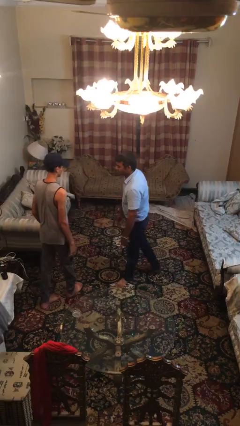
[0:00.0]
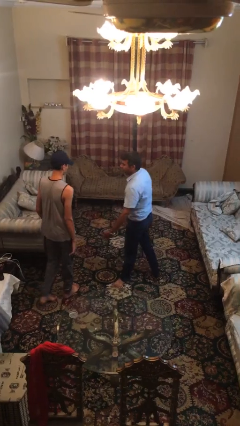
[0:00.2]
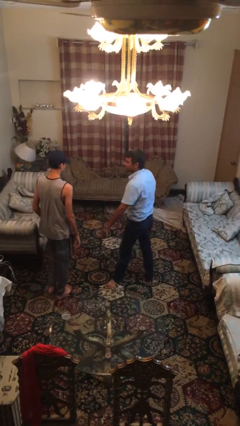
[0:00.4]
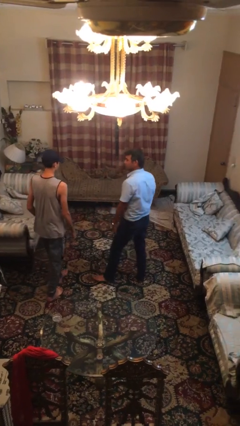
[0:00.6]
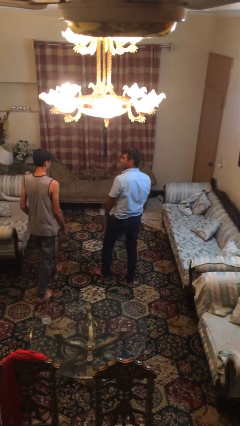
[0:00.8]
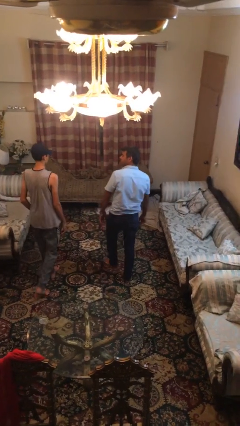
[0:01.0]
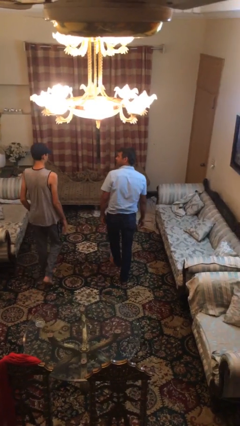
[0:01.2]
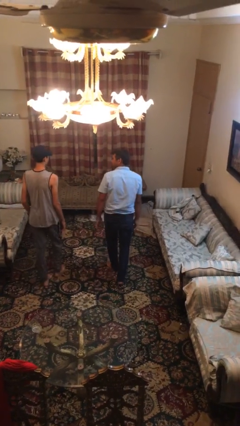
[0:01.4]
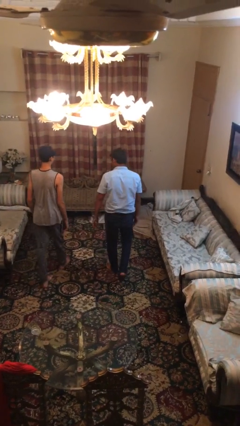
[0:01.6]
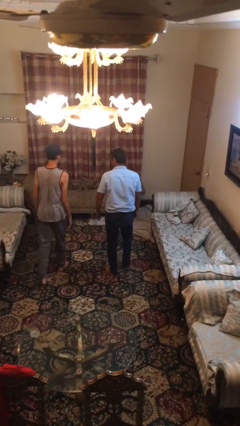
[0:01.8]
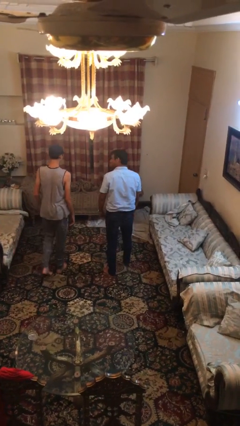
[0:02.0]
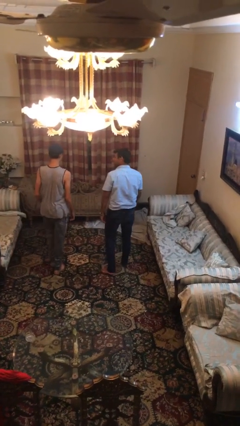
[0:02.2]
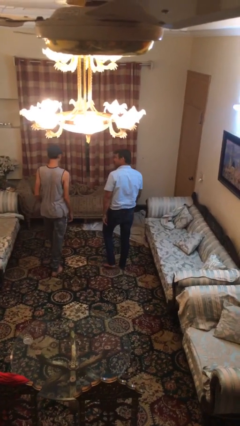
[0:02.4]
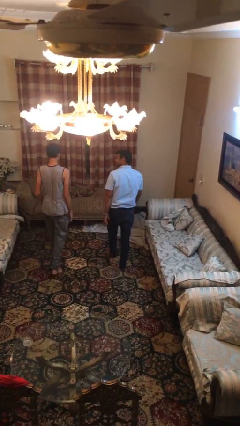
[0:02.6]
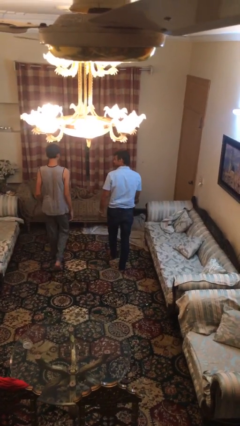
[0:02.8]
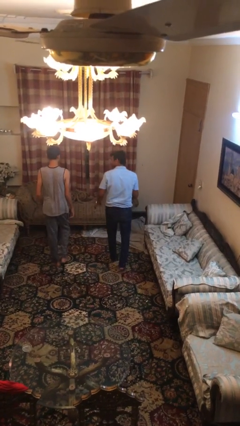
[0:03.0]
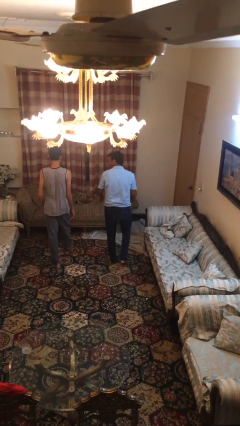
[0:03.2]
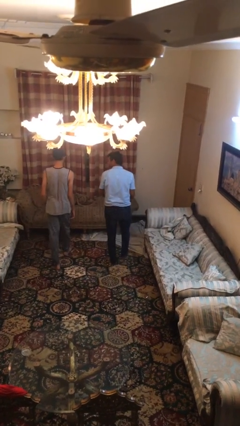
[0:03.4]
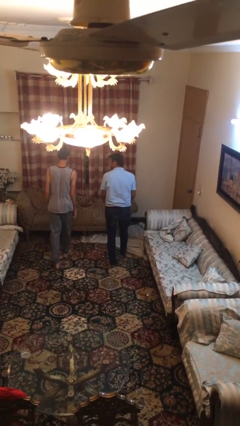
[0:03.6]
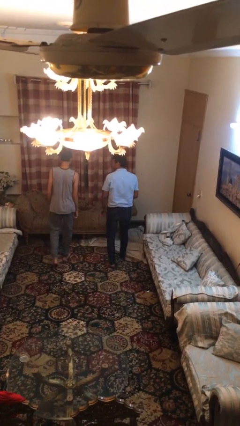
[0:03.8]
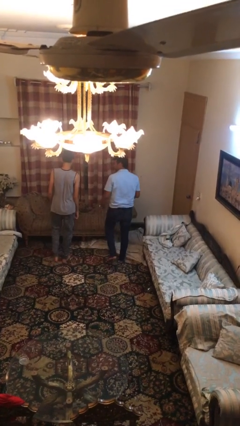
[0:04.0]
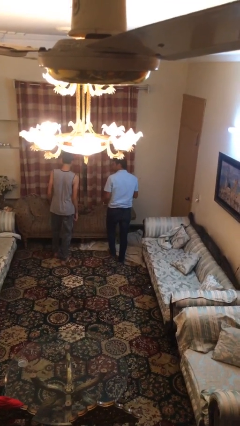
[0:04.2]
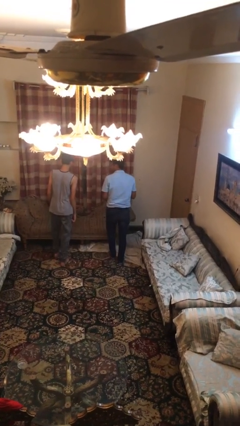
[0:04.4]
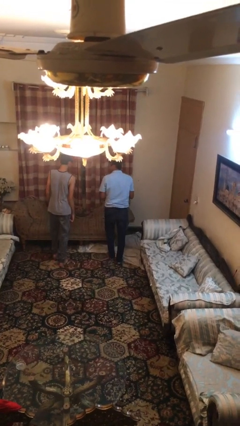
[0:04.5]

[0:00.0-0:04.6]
person talks to person

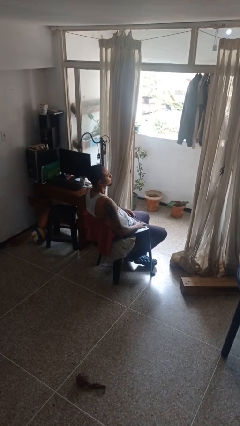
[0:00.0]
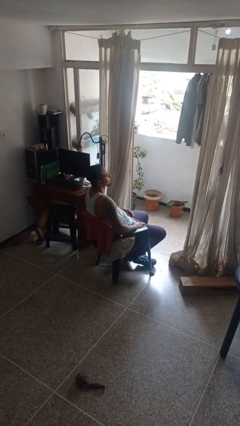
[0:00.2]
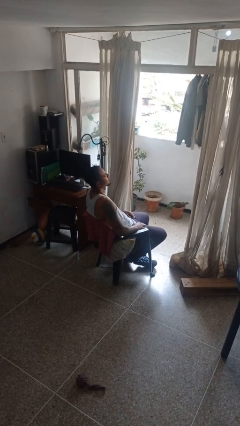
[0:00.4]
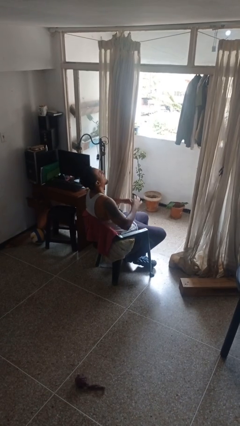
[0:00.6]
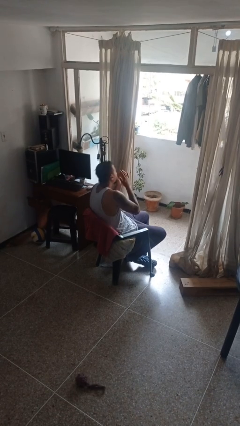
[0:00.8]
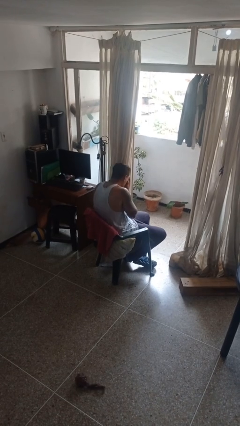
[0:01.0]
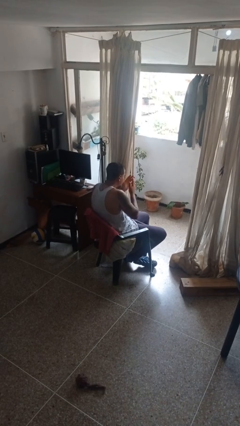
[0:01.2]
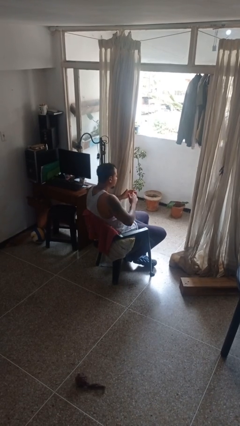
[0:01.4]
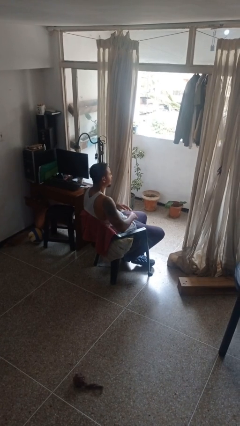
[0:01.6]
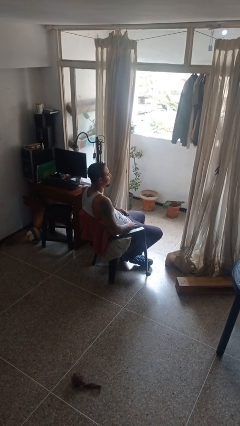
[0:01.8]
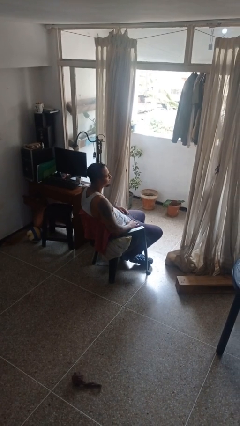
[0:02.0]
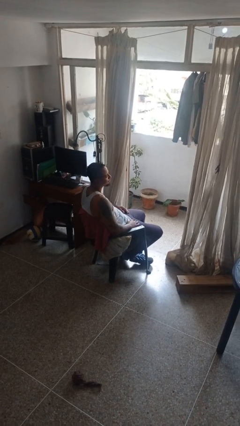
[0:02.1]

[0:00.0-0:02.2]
person sneezes into hand

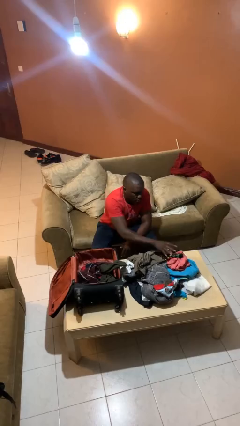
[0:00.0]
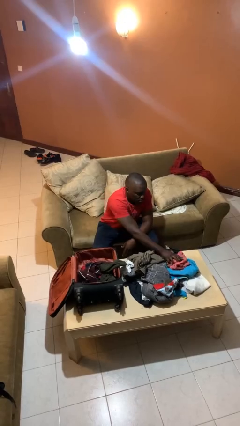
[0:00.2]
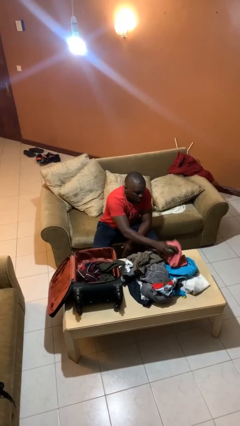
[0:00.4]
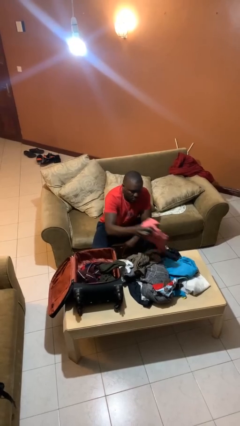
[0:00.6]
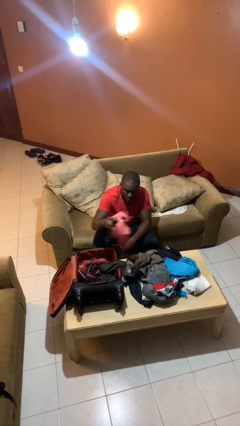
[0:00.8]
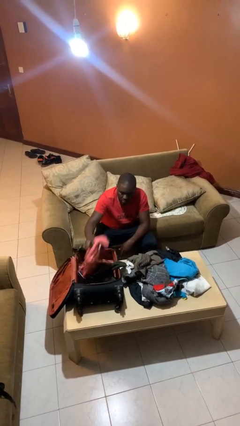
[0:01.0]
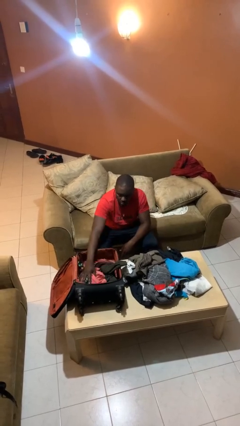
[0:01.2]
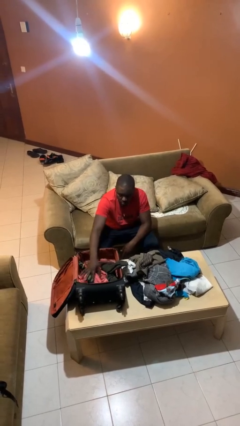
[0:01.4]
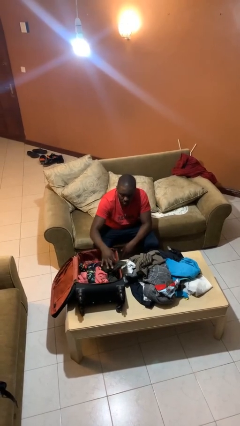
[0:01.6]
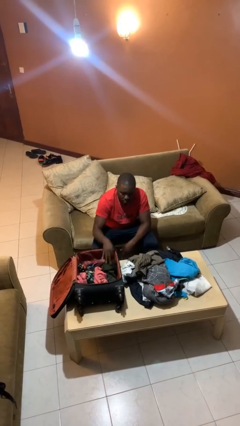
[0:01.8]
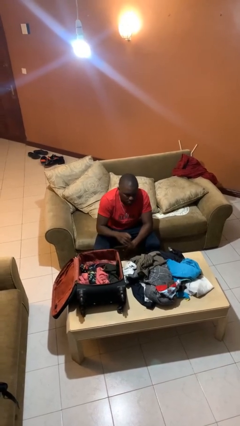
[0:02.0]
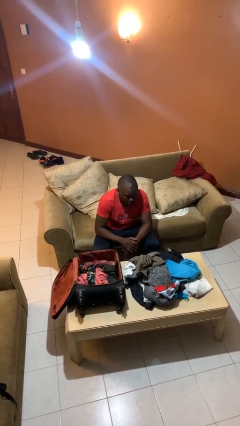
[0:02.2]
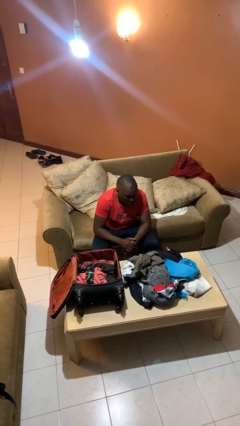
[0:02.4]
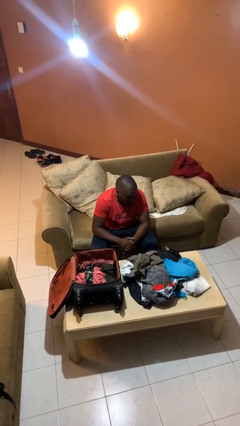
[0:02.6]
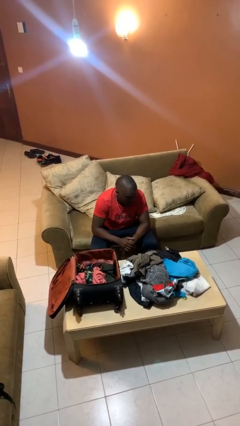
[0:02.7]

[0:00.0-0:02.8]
person loads clothes into suitcase

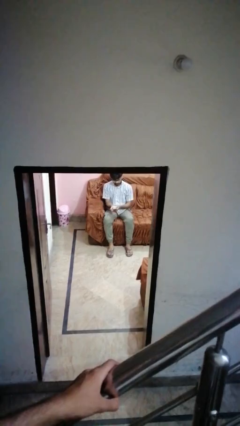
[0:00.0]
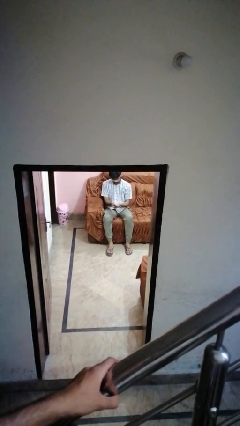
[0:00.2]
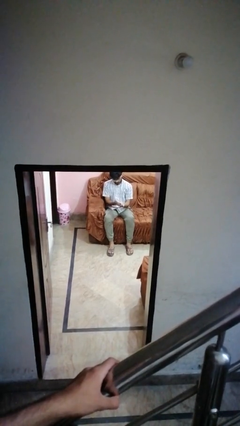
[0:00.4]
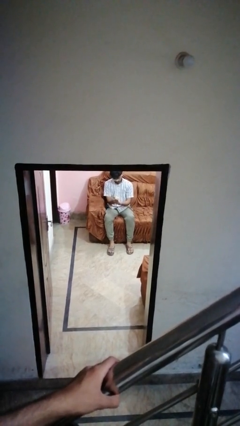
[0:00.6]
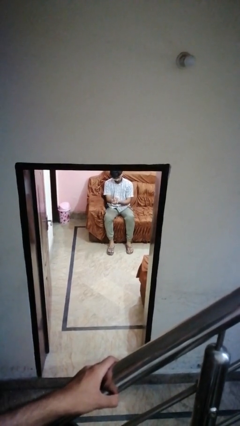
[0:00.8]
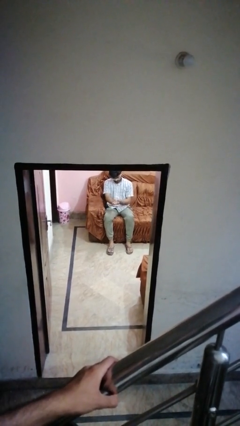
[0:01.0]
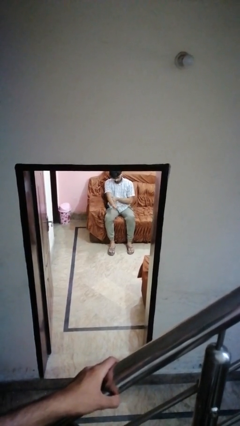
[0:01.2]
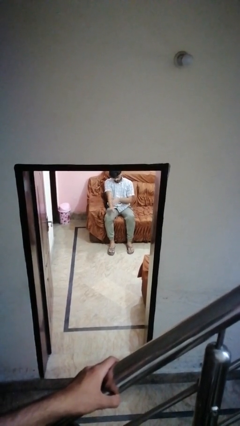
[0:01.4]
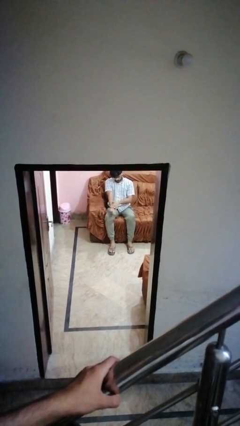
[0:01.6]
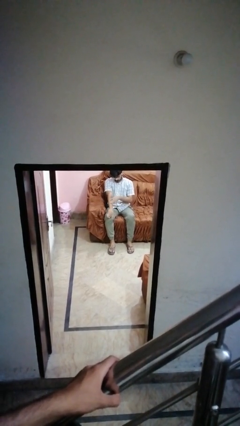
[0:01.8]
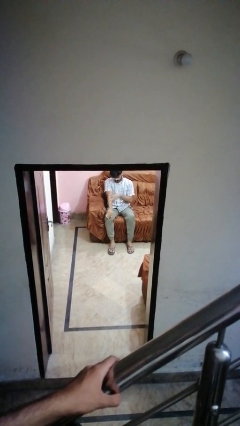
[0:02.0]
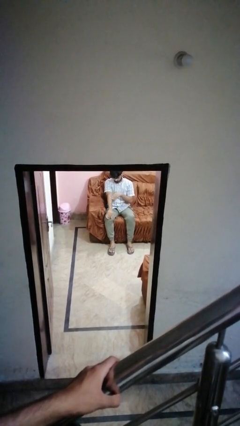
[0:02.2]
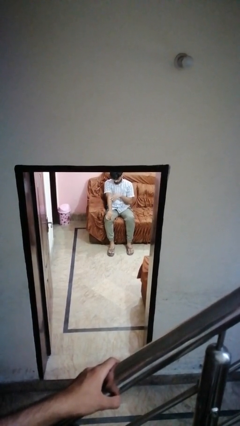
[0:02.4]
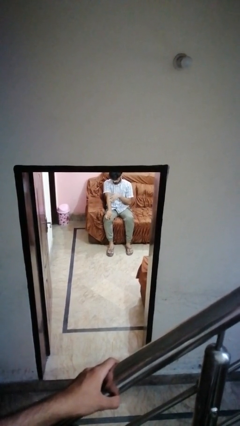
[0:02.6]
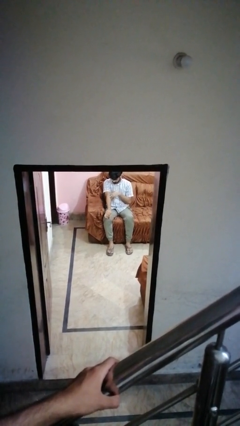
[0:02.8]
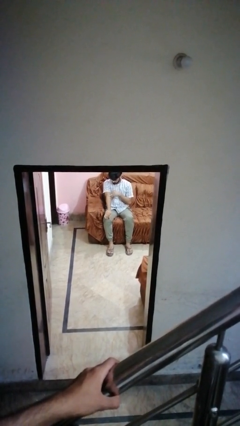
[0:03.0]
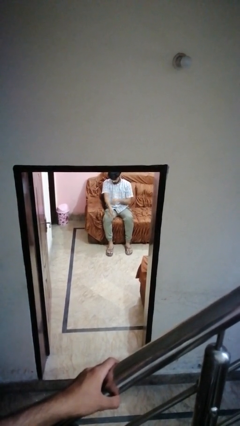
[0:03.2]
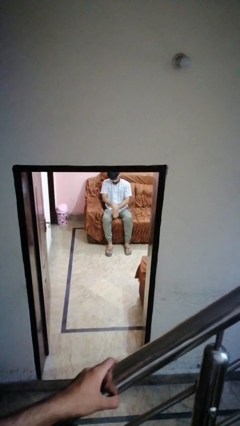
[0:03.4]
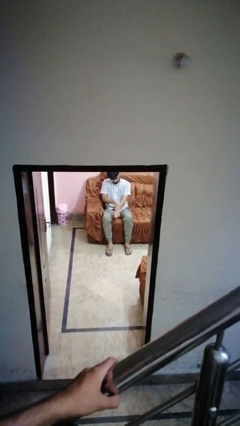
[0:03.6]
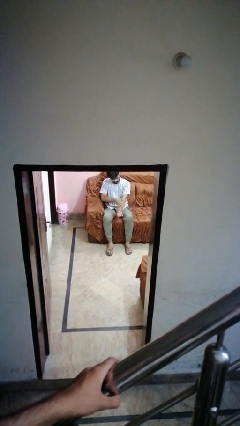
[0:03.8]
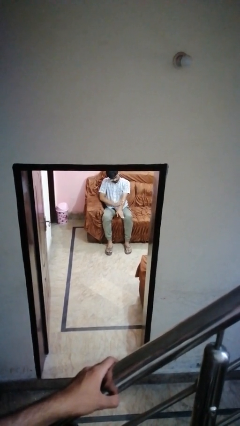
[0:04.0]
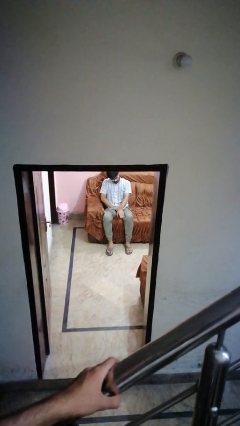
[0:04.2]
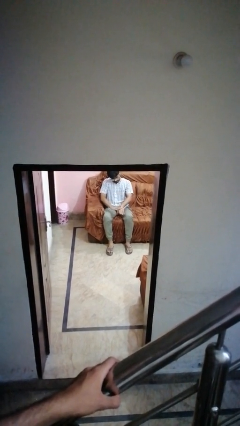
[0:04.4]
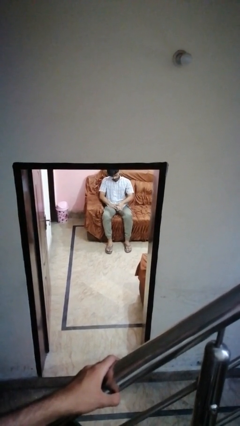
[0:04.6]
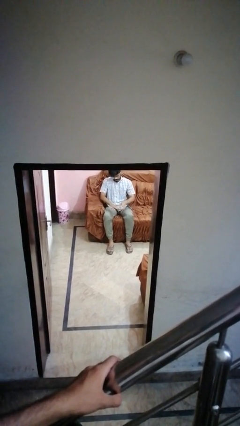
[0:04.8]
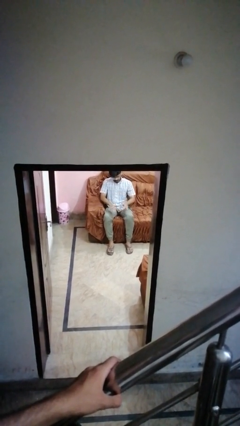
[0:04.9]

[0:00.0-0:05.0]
person looks at hands in lap

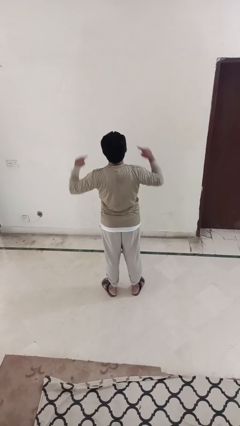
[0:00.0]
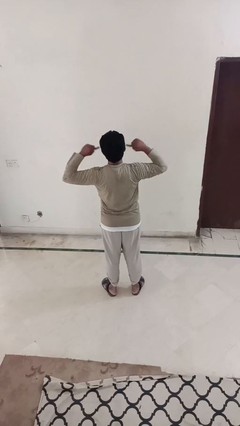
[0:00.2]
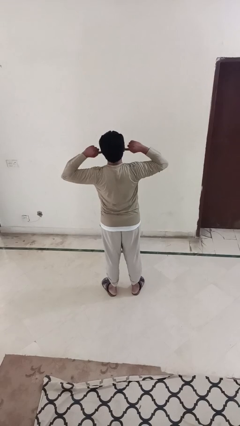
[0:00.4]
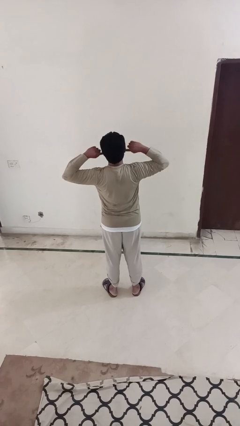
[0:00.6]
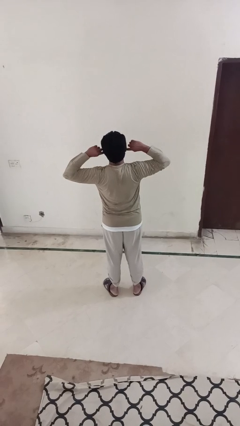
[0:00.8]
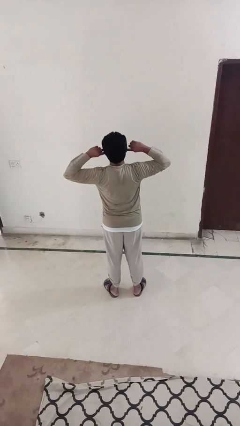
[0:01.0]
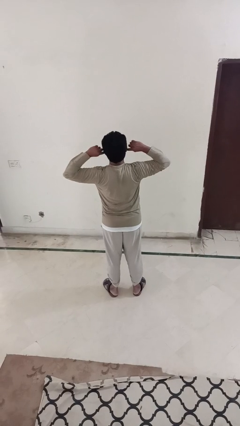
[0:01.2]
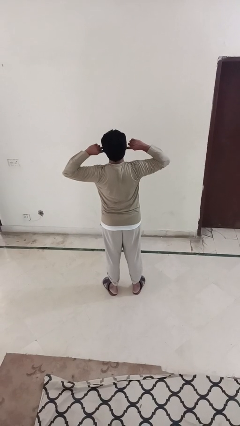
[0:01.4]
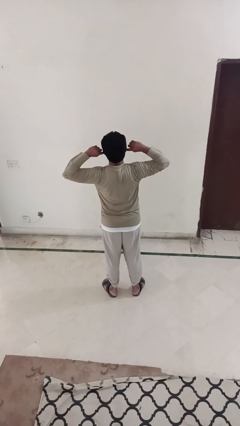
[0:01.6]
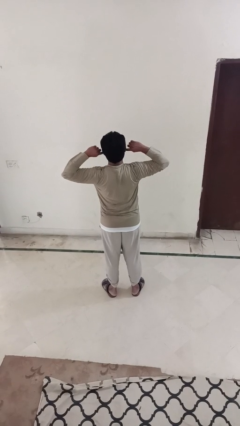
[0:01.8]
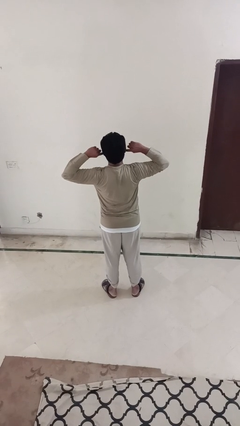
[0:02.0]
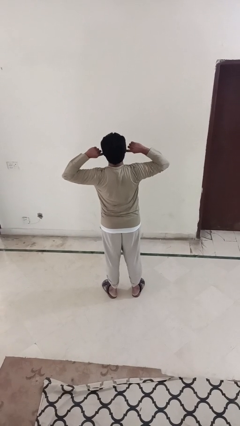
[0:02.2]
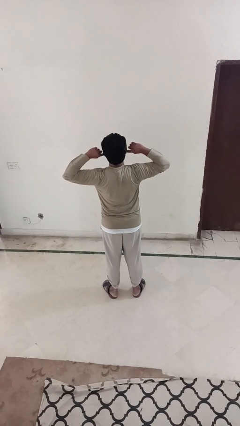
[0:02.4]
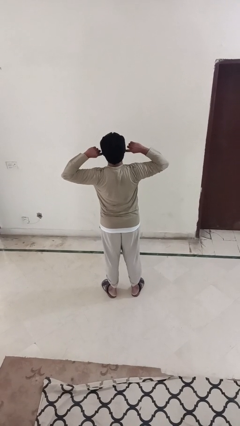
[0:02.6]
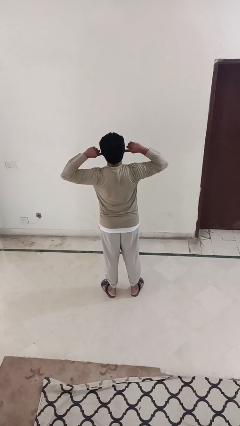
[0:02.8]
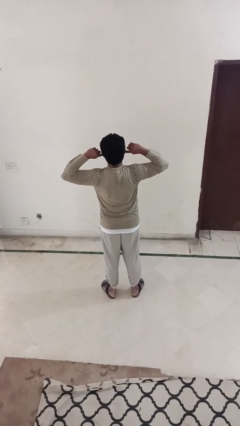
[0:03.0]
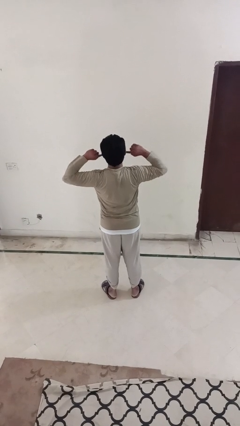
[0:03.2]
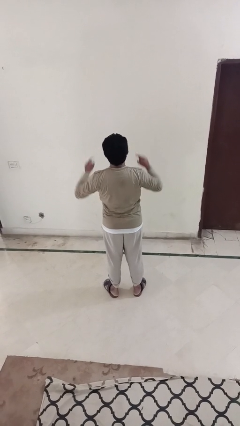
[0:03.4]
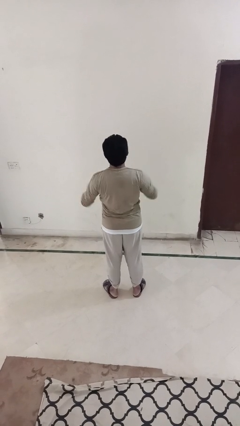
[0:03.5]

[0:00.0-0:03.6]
person puts fingers in ear
